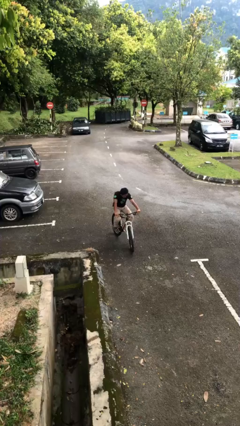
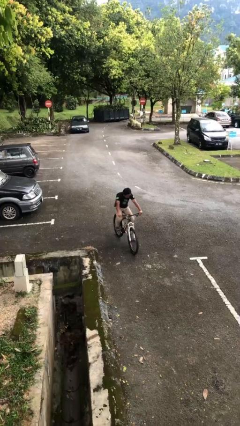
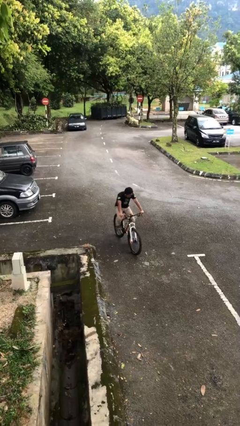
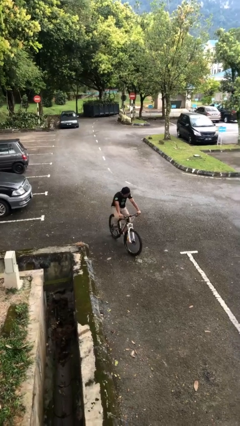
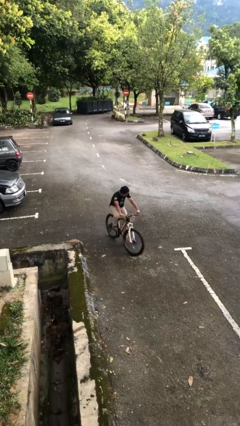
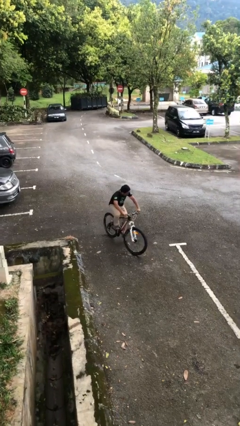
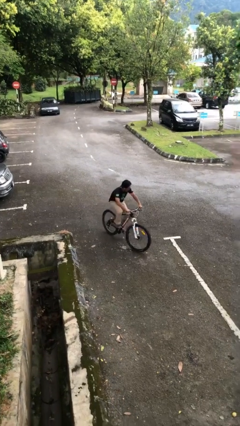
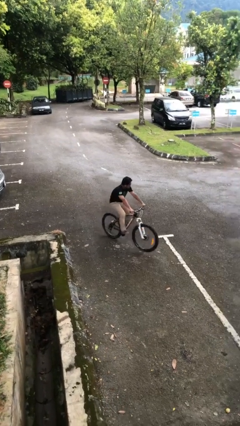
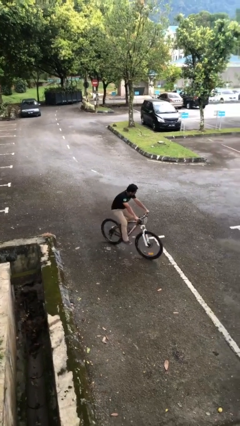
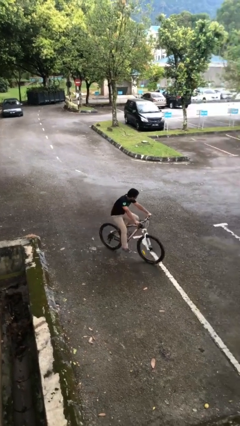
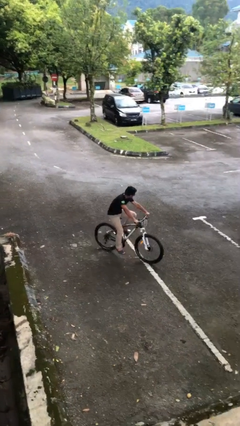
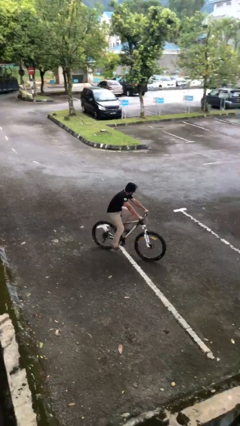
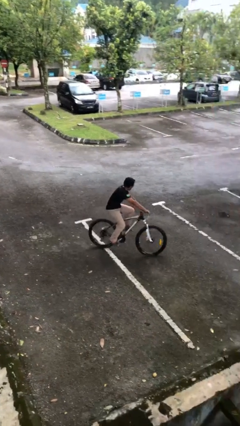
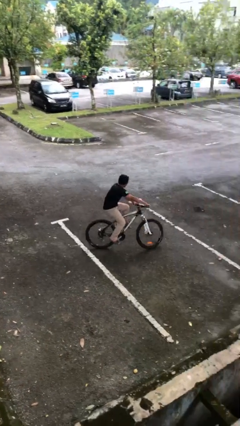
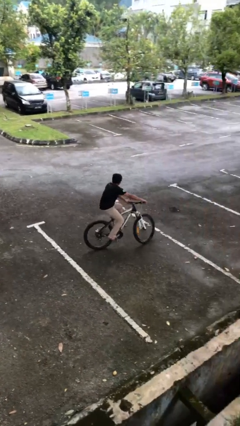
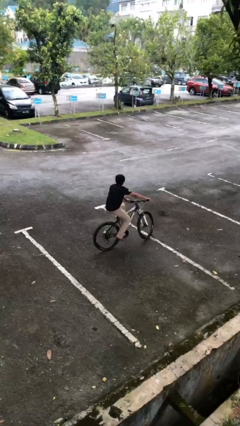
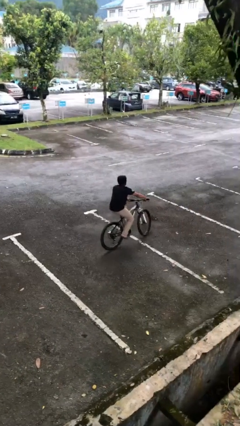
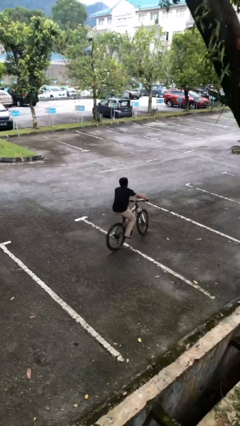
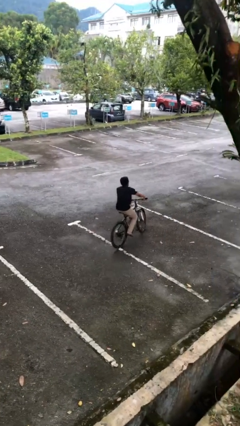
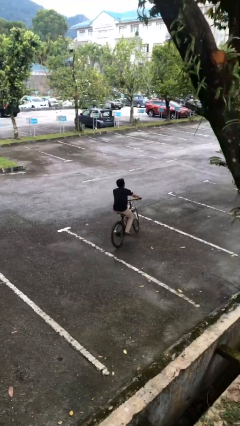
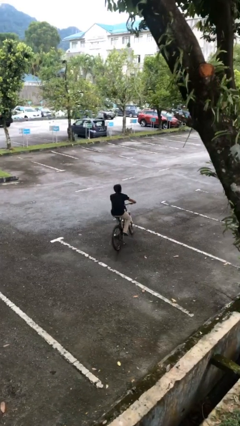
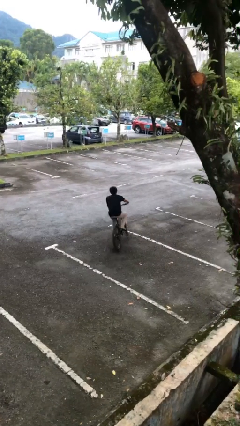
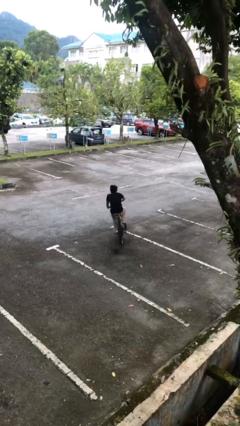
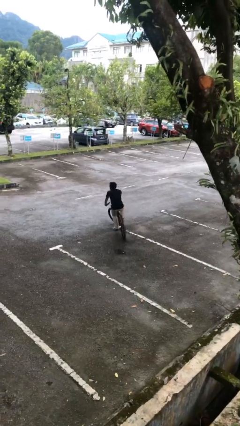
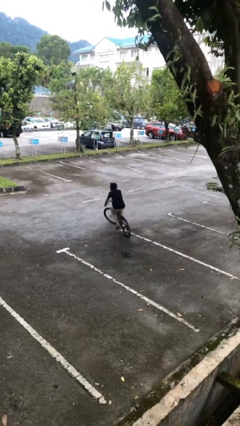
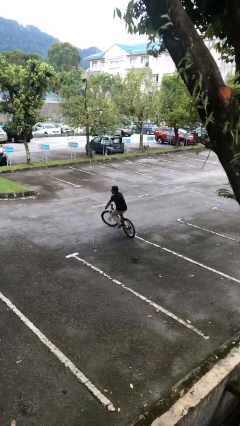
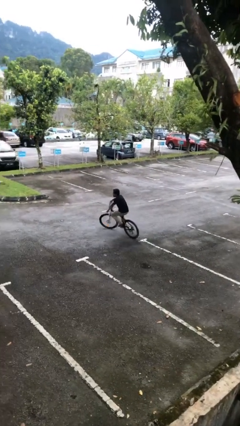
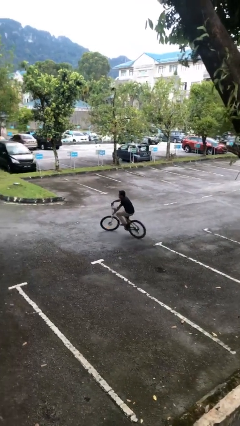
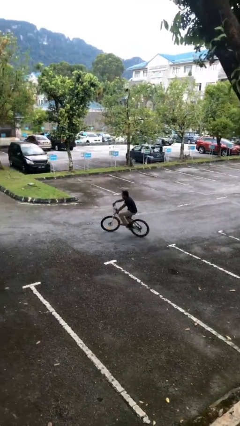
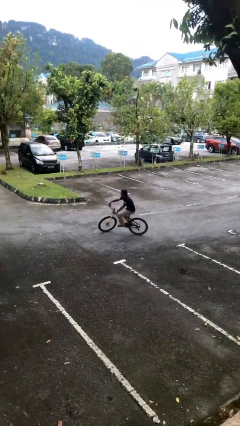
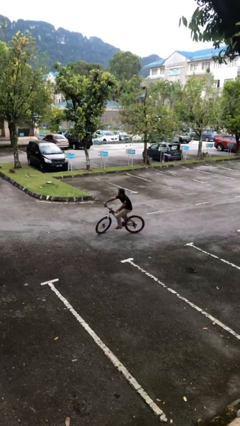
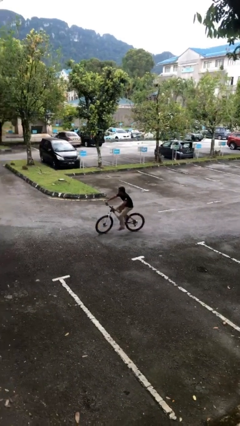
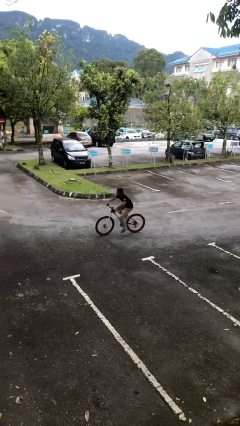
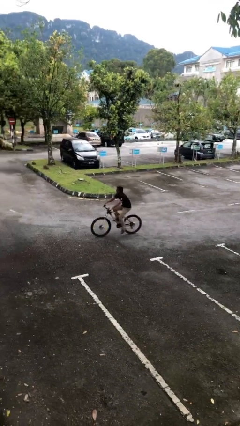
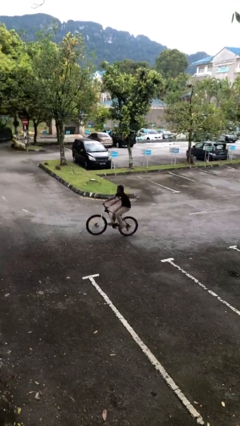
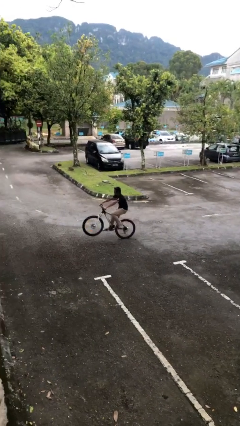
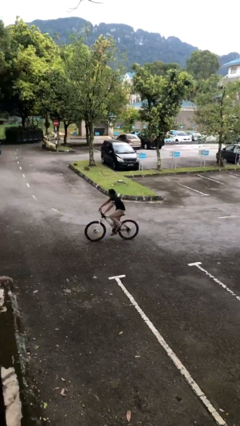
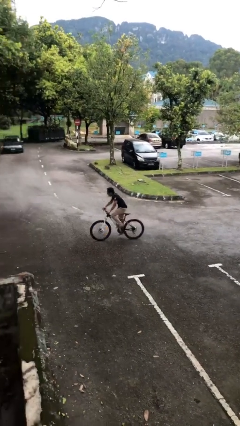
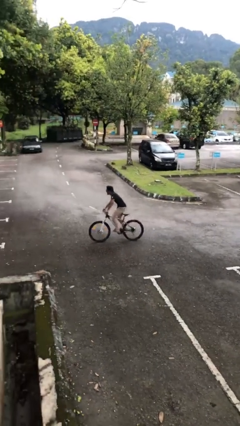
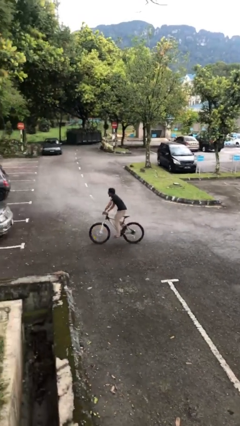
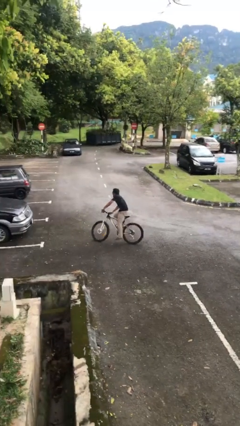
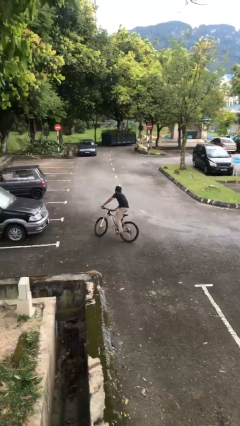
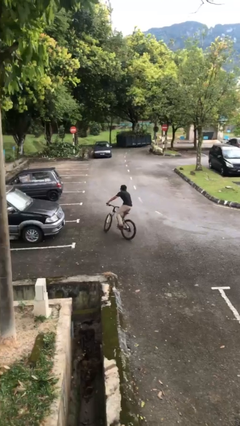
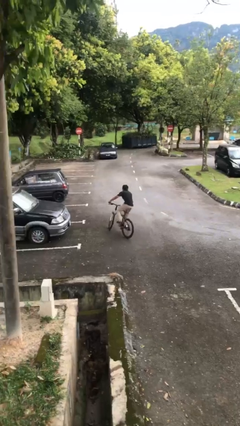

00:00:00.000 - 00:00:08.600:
person rides bicycle

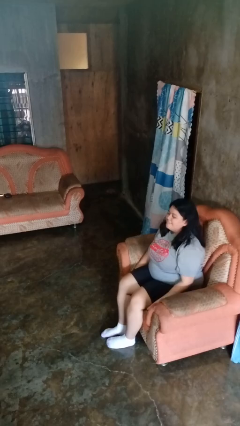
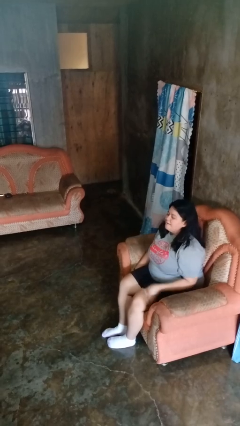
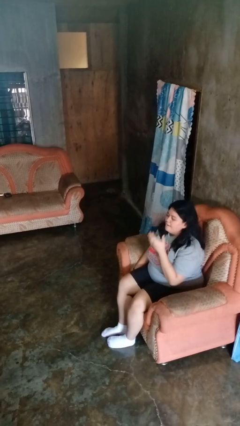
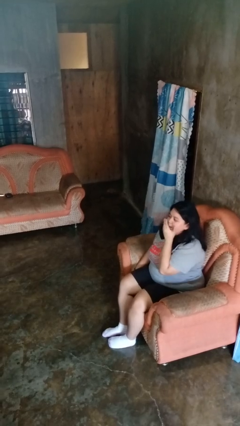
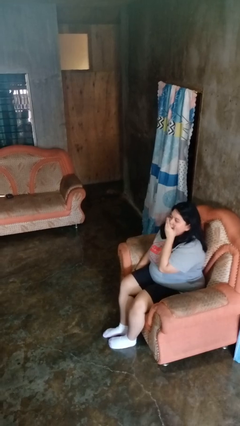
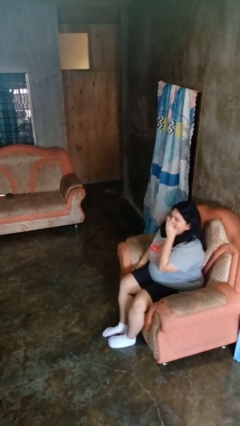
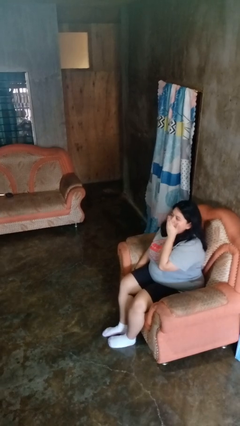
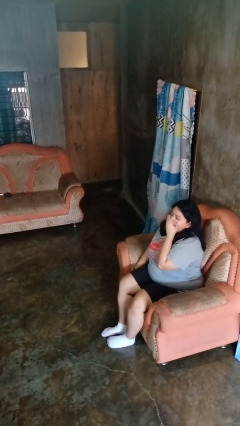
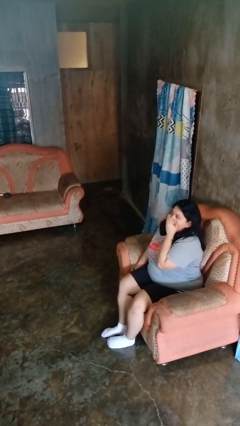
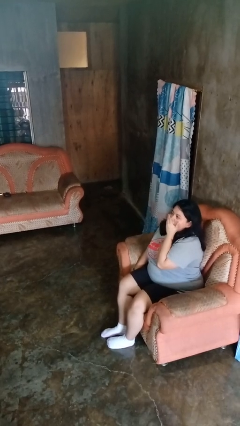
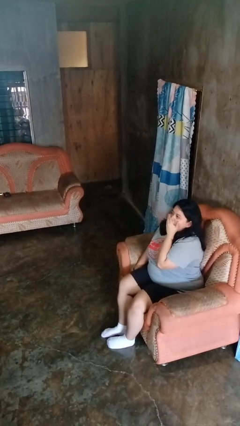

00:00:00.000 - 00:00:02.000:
person yawns

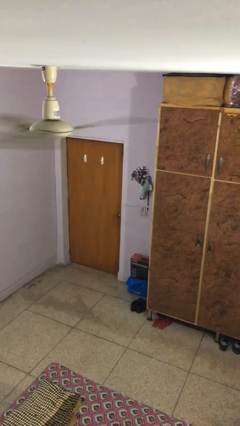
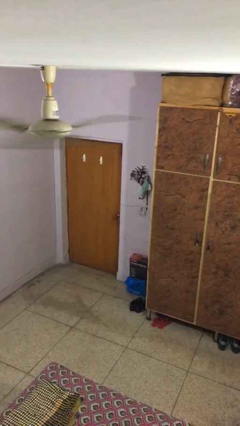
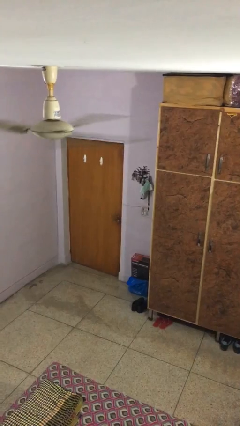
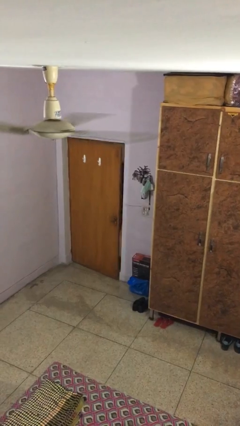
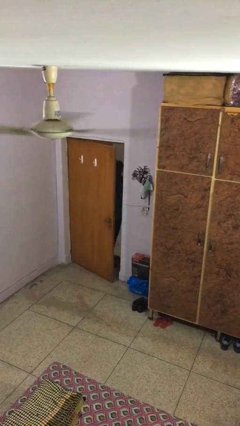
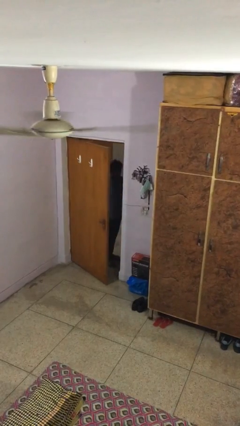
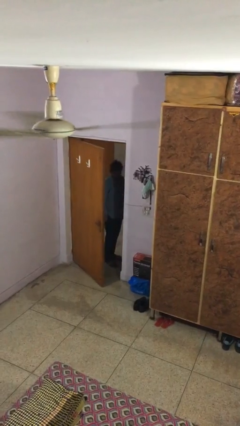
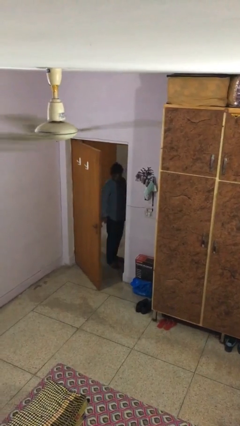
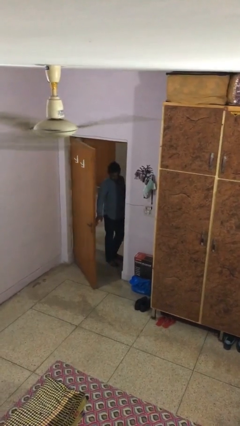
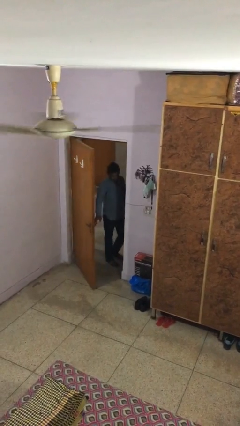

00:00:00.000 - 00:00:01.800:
person opens facility door

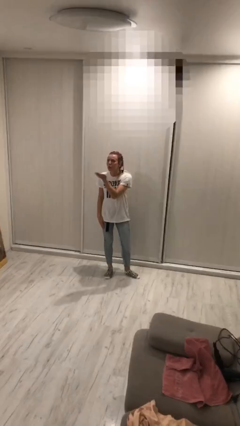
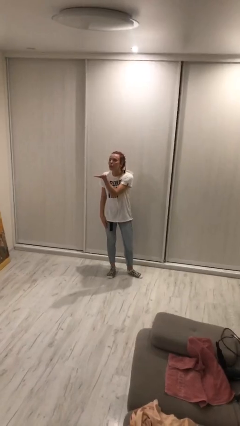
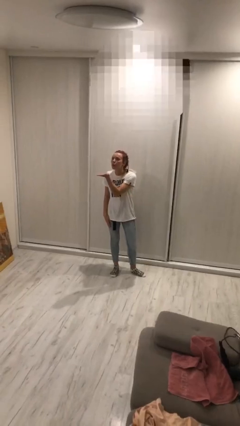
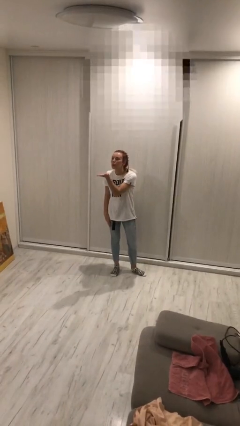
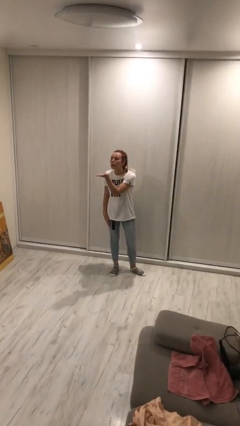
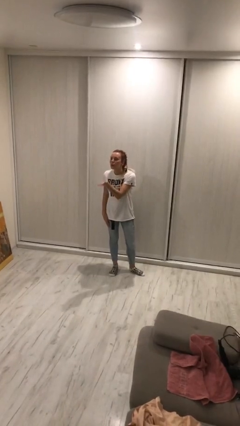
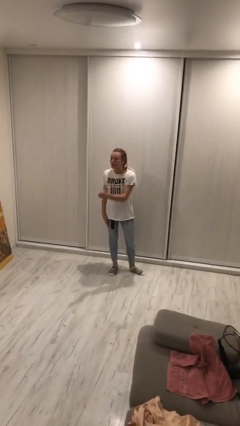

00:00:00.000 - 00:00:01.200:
person gestures blow kiss

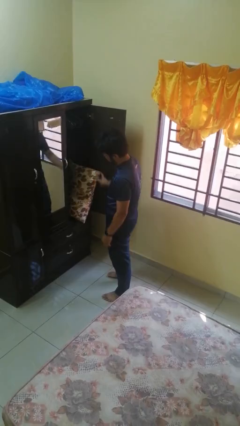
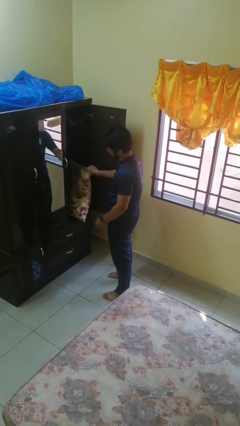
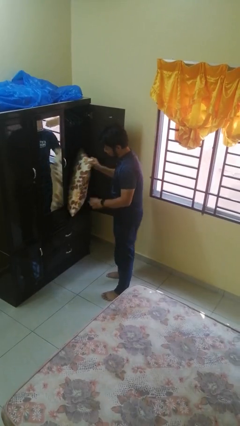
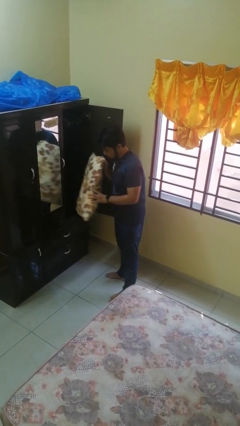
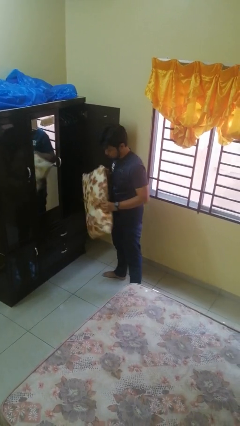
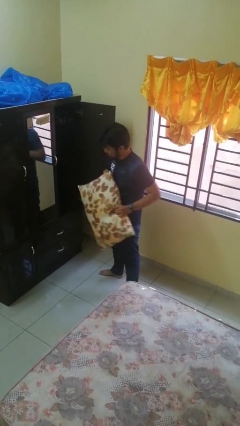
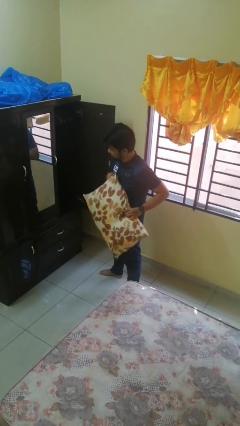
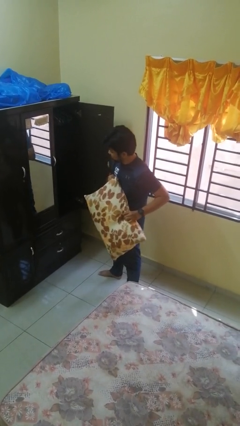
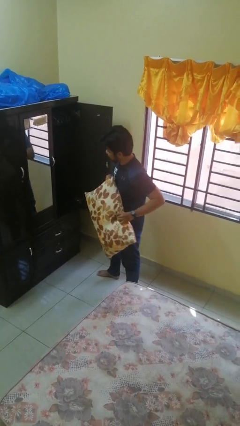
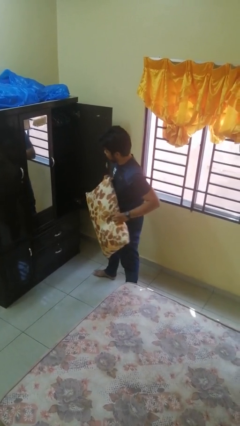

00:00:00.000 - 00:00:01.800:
person picks up object from cabinet

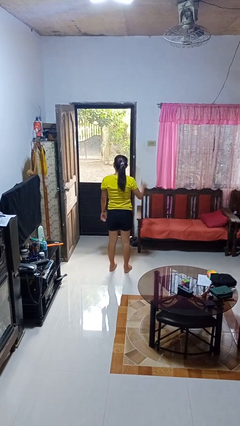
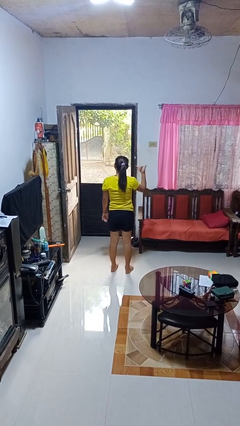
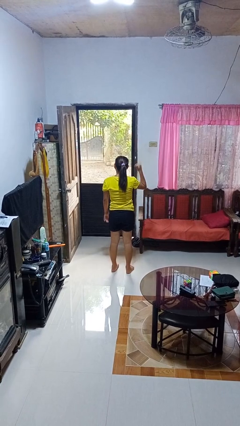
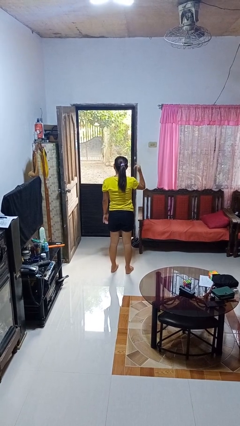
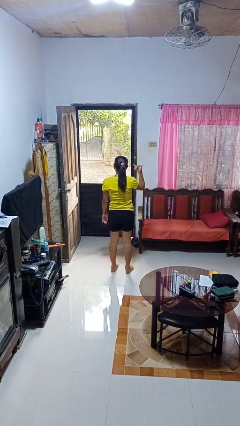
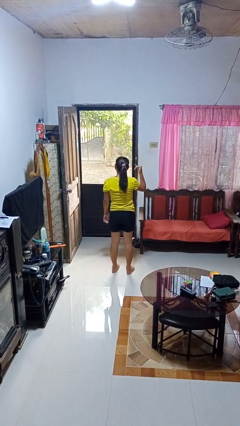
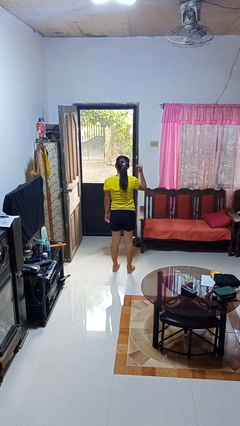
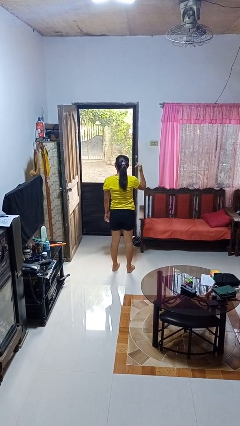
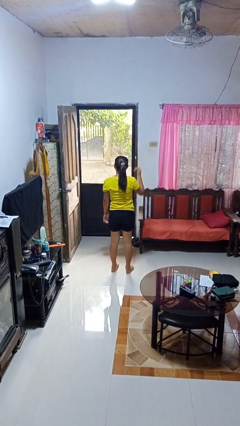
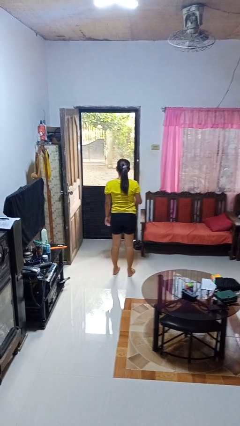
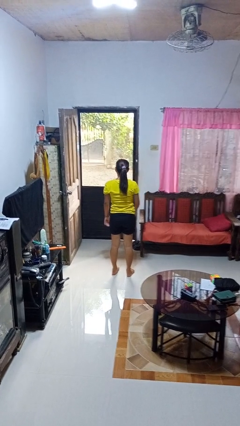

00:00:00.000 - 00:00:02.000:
person gestures hang loose
